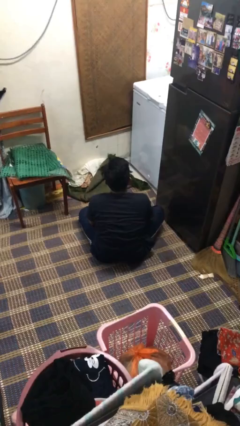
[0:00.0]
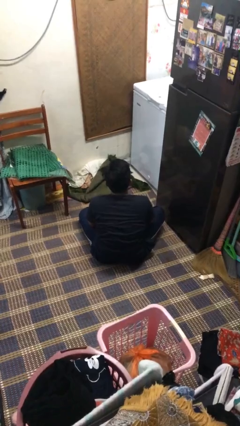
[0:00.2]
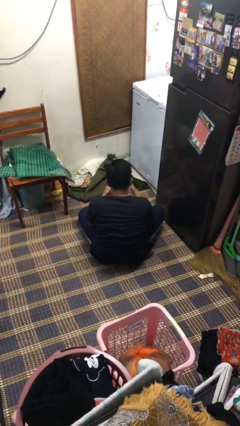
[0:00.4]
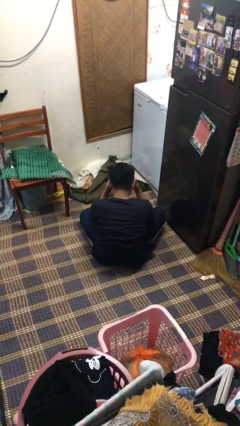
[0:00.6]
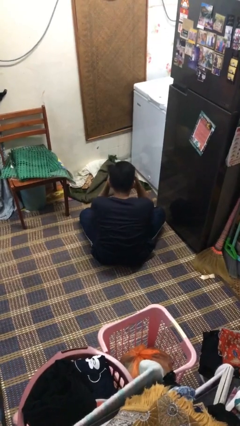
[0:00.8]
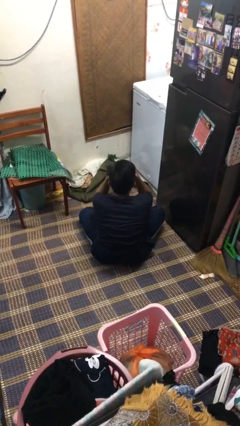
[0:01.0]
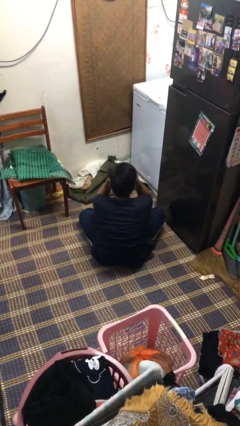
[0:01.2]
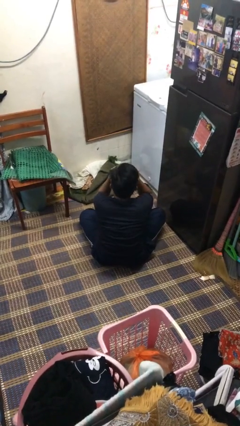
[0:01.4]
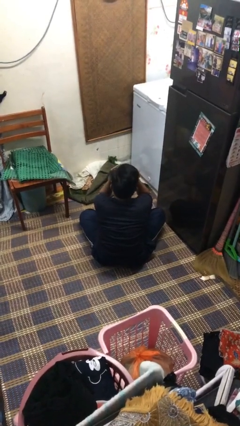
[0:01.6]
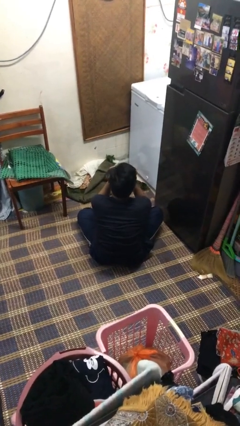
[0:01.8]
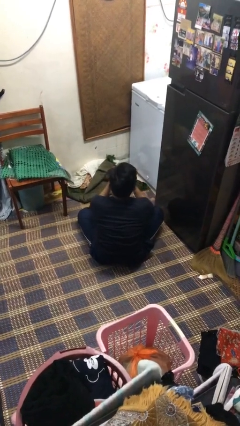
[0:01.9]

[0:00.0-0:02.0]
person covers face with hands

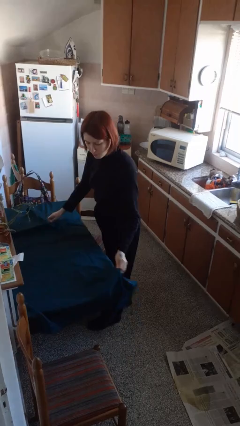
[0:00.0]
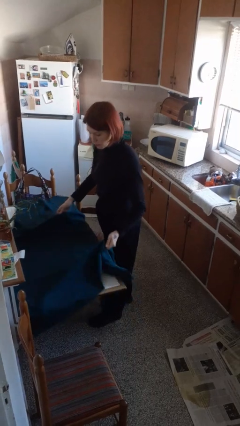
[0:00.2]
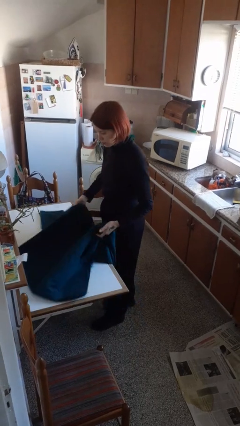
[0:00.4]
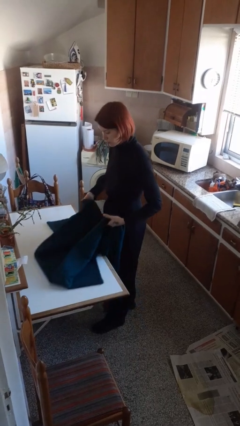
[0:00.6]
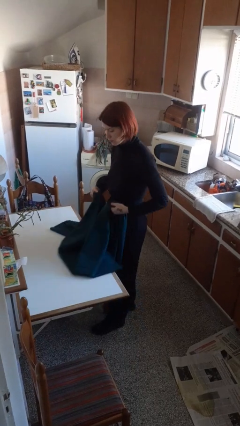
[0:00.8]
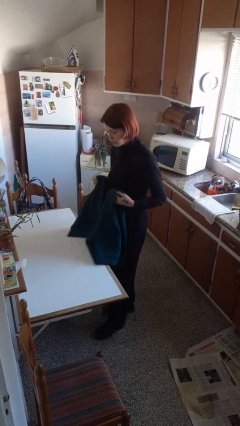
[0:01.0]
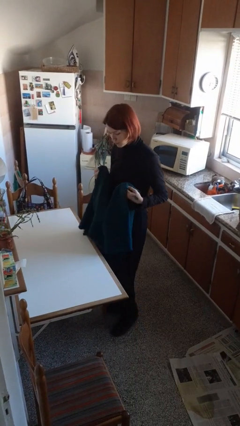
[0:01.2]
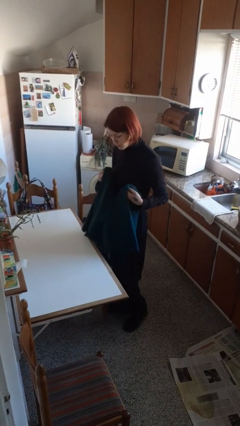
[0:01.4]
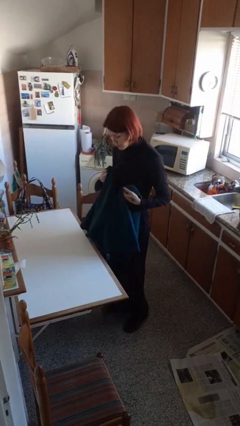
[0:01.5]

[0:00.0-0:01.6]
person folds tablecloth

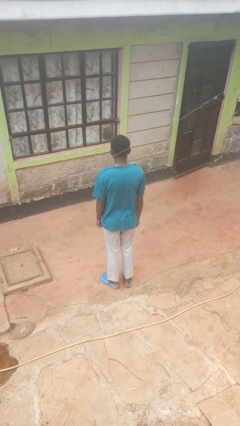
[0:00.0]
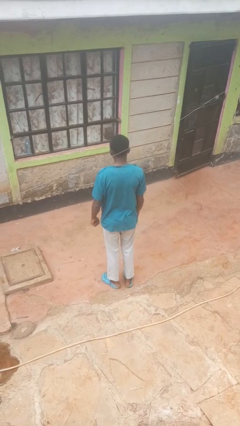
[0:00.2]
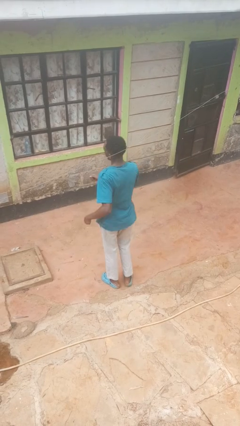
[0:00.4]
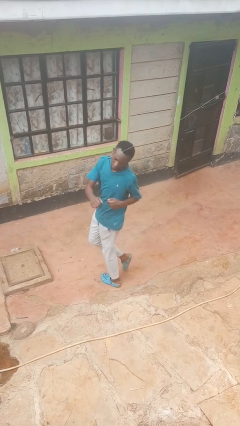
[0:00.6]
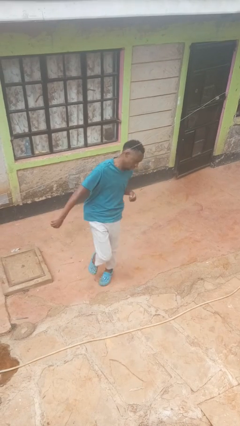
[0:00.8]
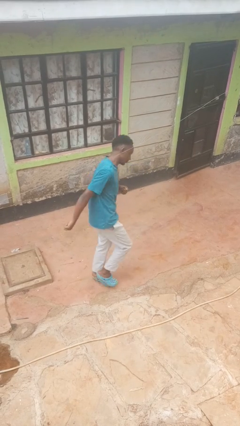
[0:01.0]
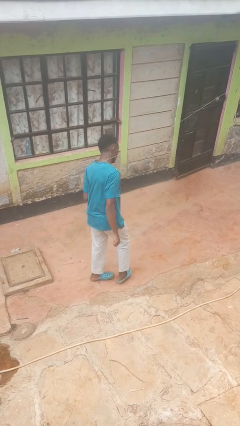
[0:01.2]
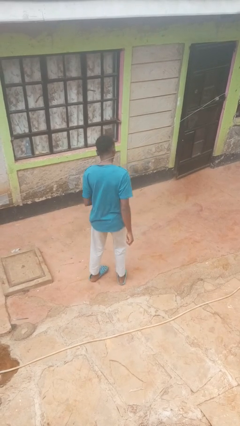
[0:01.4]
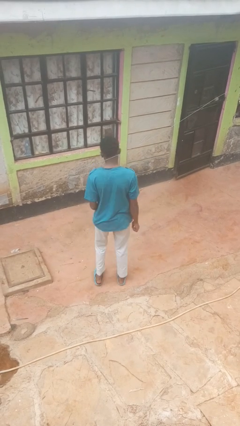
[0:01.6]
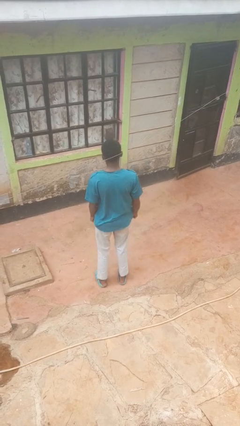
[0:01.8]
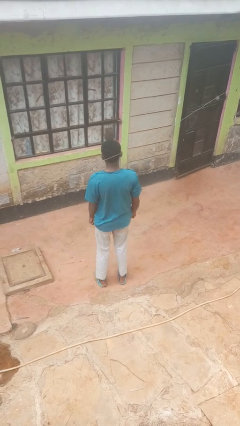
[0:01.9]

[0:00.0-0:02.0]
person twirls

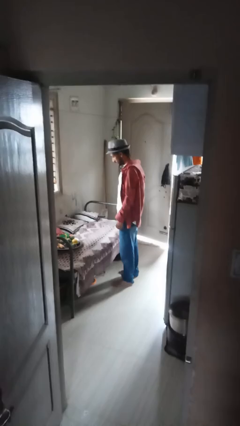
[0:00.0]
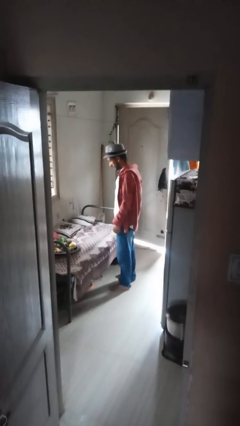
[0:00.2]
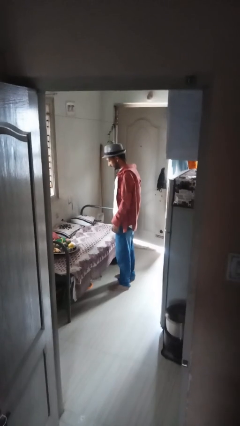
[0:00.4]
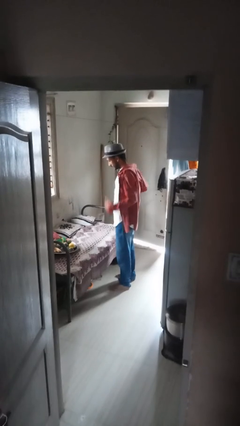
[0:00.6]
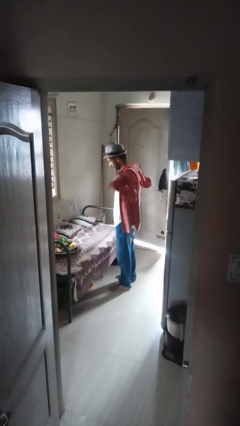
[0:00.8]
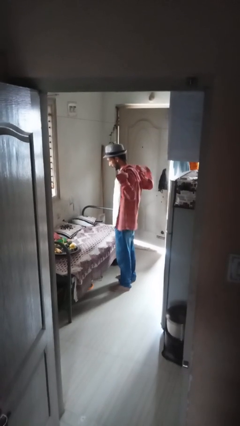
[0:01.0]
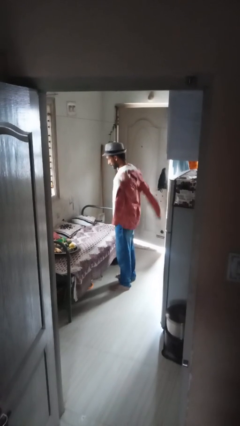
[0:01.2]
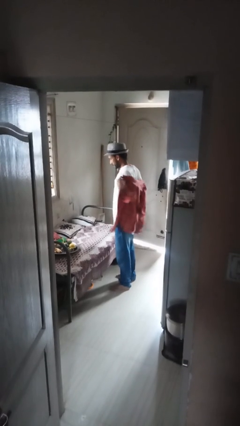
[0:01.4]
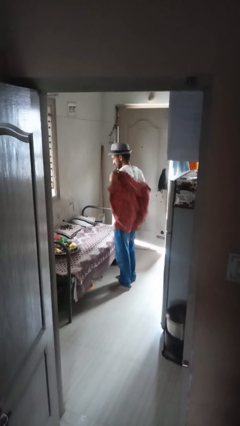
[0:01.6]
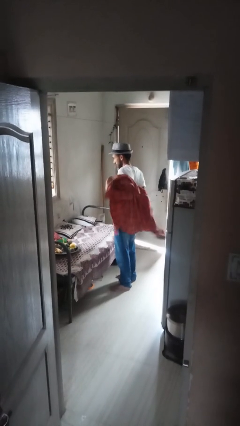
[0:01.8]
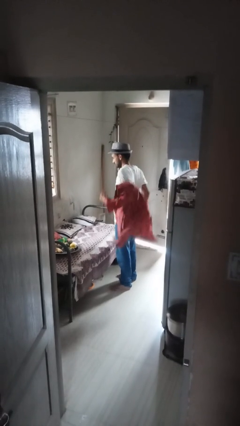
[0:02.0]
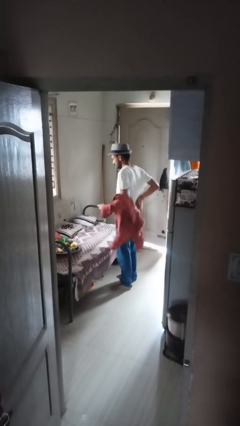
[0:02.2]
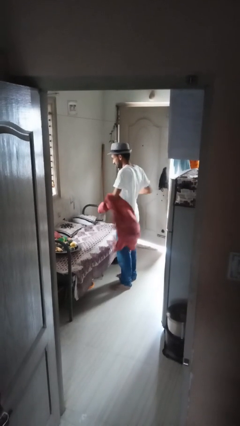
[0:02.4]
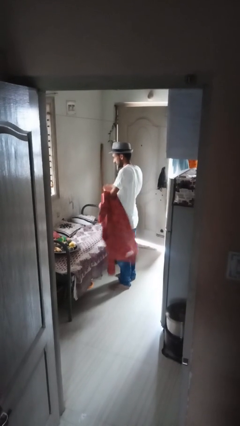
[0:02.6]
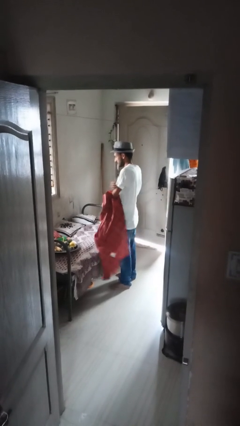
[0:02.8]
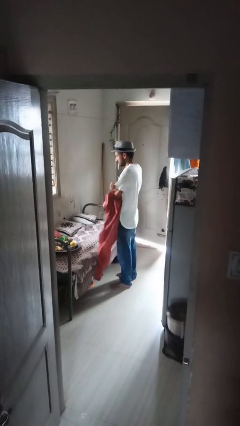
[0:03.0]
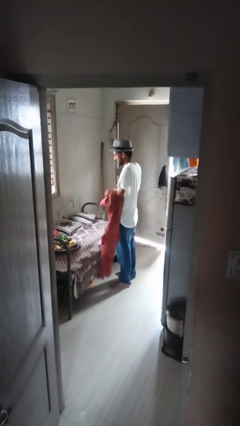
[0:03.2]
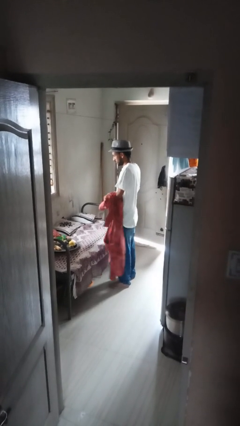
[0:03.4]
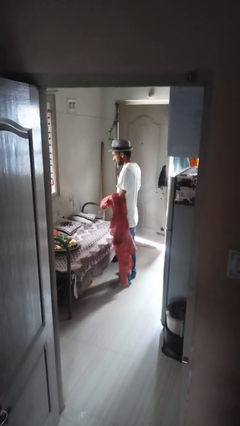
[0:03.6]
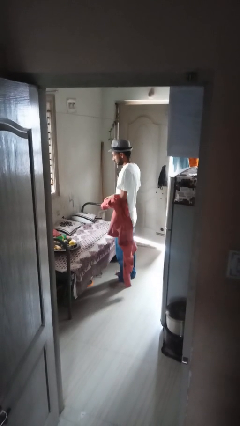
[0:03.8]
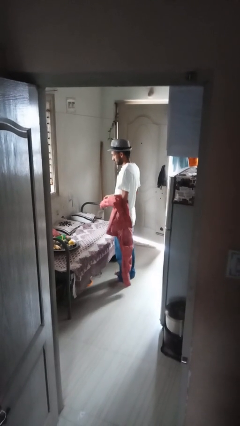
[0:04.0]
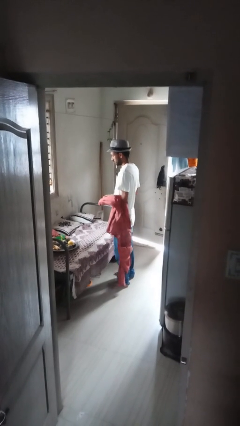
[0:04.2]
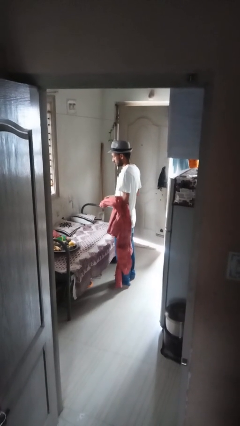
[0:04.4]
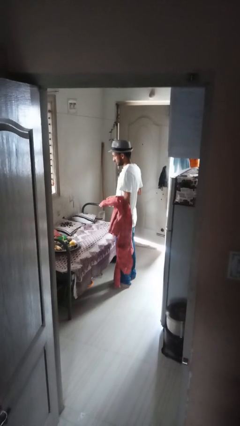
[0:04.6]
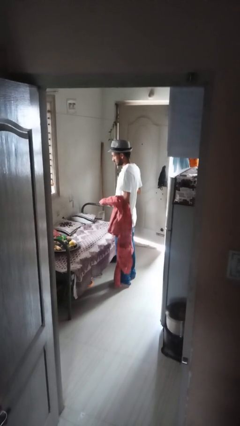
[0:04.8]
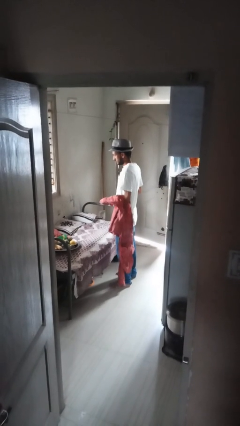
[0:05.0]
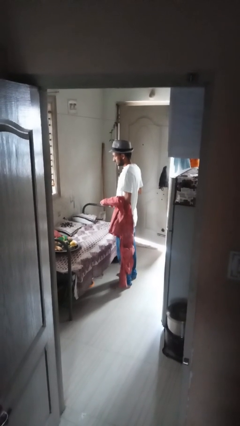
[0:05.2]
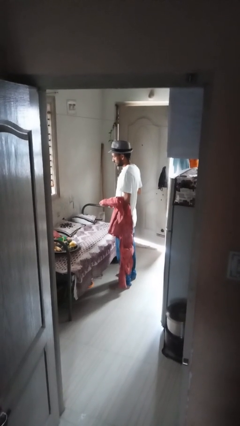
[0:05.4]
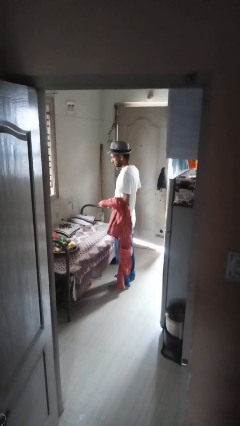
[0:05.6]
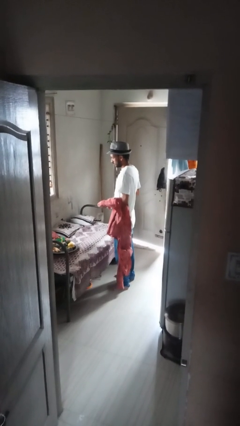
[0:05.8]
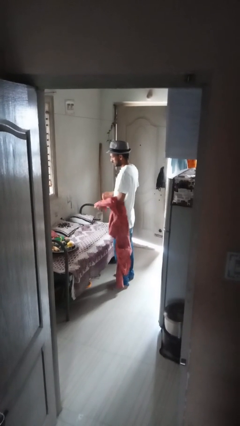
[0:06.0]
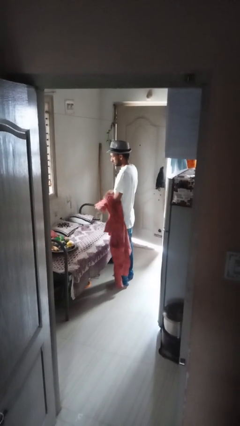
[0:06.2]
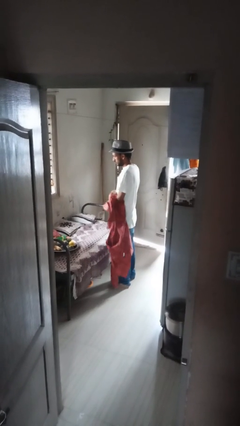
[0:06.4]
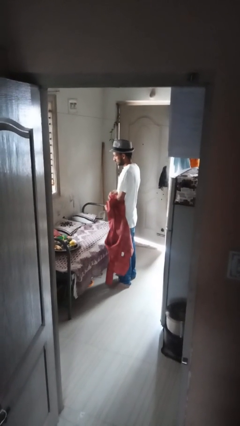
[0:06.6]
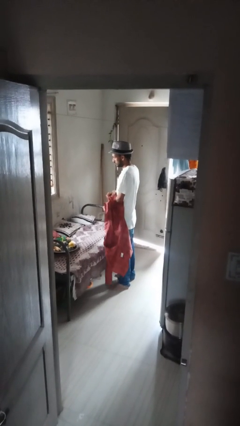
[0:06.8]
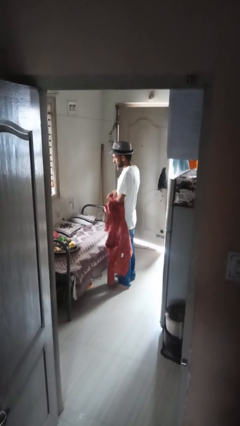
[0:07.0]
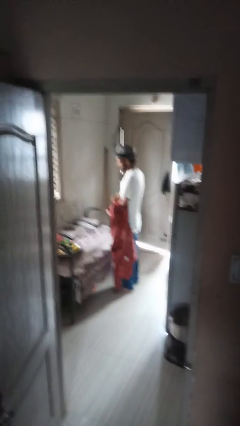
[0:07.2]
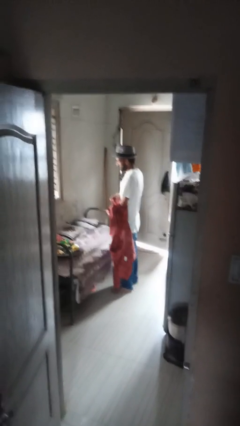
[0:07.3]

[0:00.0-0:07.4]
person takes off shirt

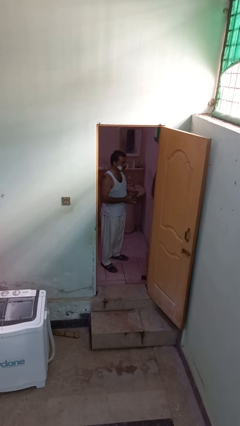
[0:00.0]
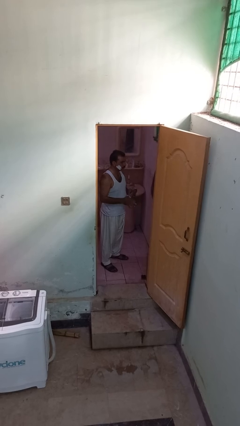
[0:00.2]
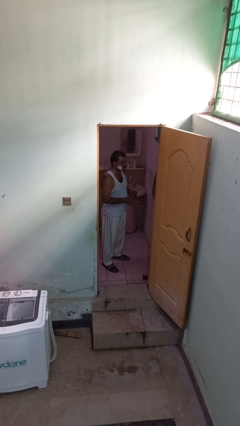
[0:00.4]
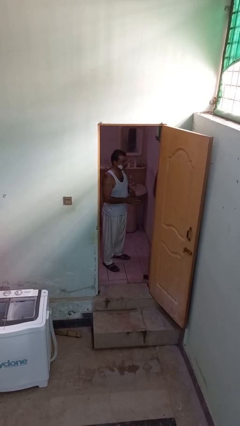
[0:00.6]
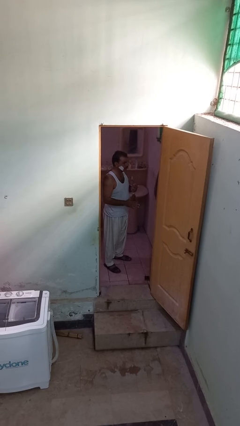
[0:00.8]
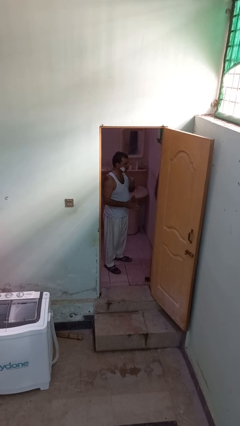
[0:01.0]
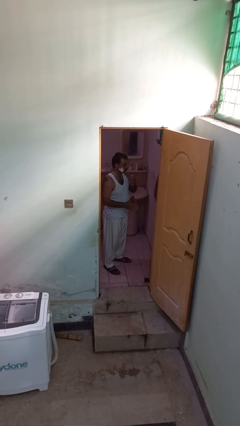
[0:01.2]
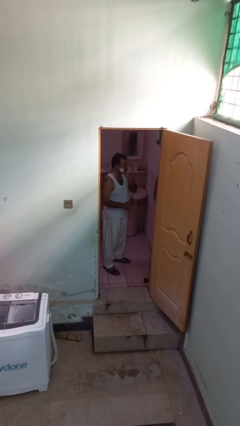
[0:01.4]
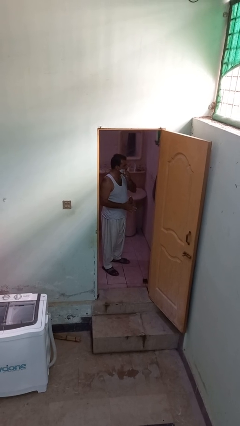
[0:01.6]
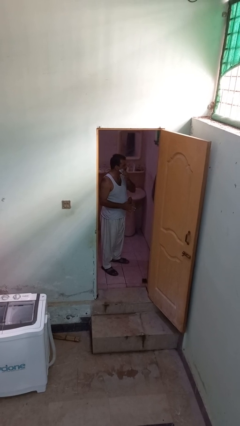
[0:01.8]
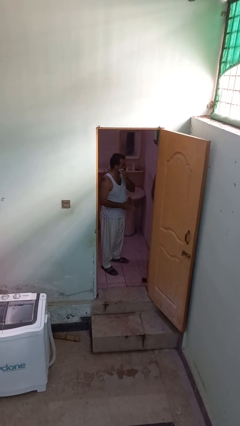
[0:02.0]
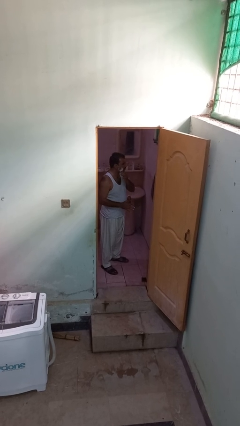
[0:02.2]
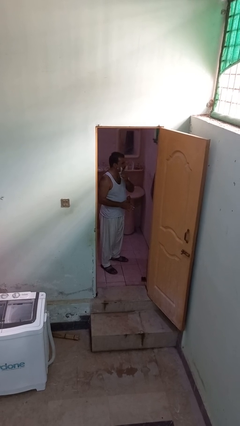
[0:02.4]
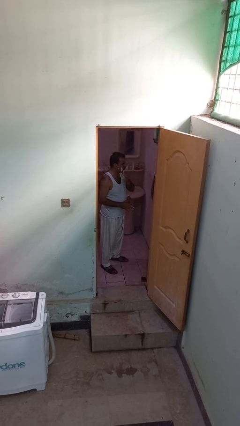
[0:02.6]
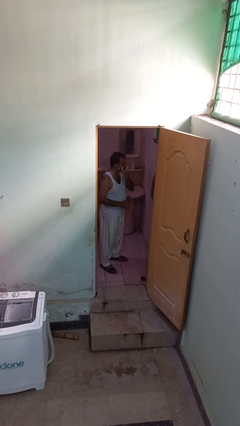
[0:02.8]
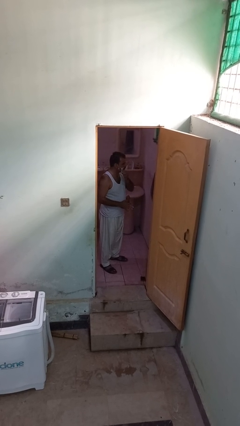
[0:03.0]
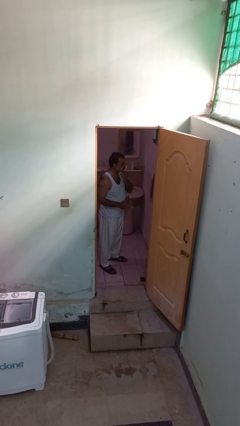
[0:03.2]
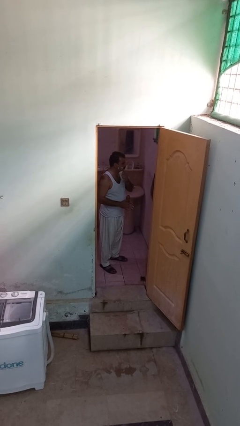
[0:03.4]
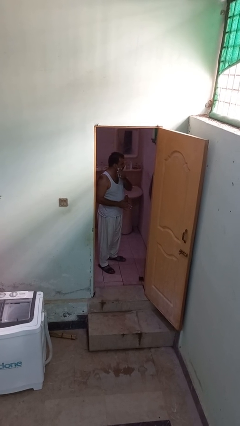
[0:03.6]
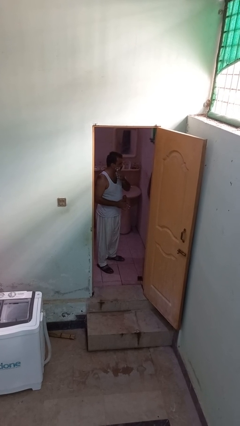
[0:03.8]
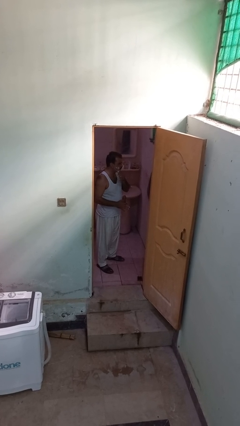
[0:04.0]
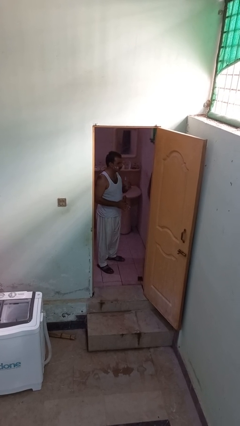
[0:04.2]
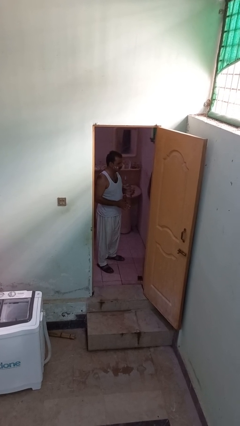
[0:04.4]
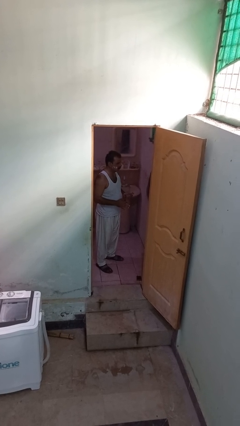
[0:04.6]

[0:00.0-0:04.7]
person shaves face
